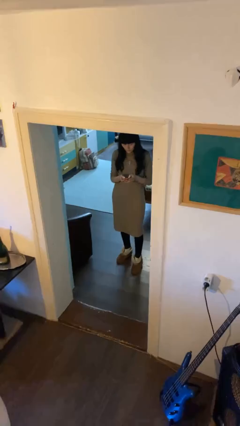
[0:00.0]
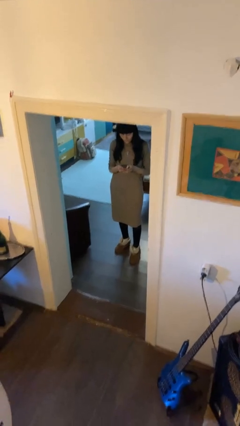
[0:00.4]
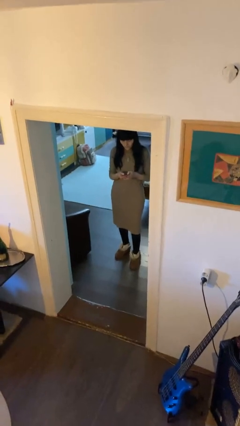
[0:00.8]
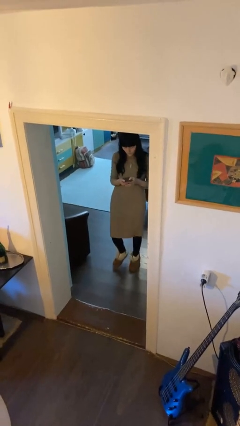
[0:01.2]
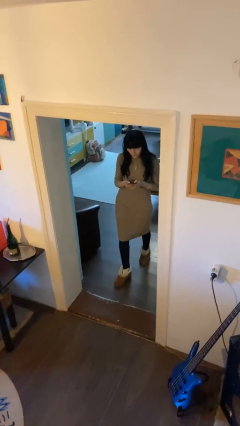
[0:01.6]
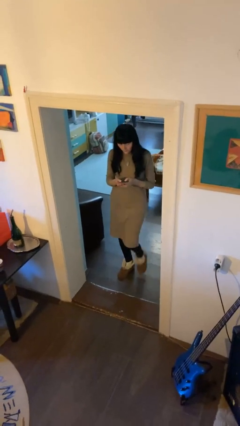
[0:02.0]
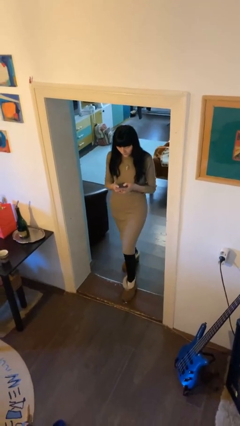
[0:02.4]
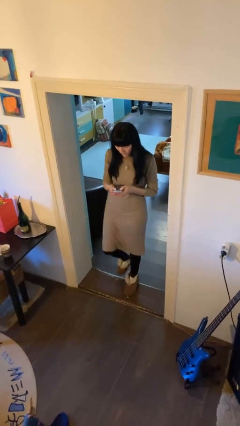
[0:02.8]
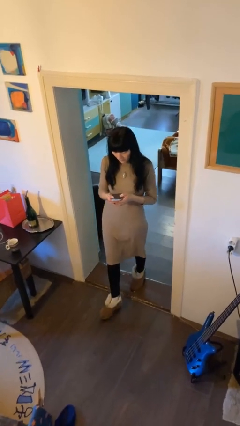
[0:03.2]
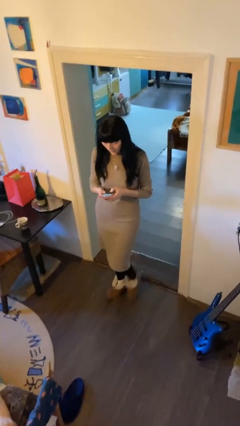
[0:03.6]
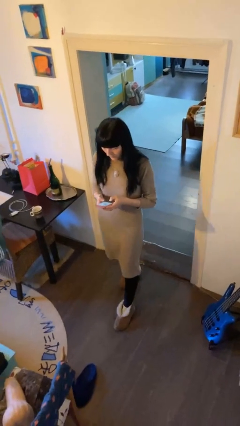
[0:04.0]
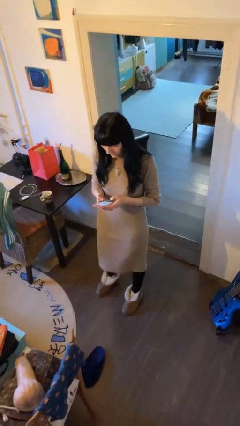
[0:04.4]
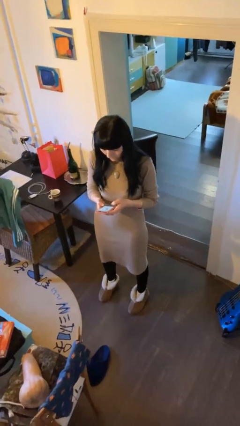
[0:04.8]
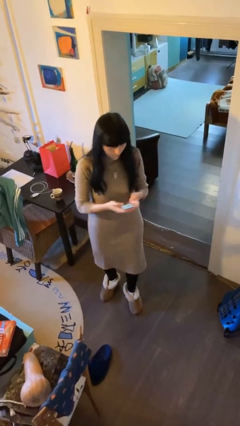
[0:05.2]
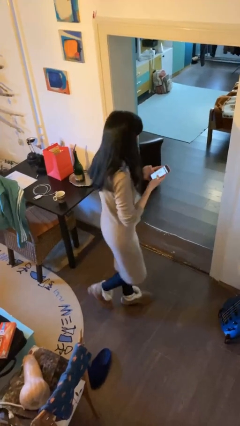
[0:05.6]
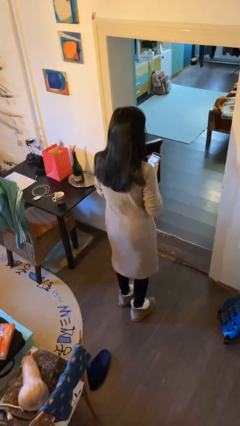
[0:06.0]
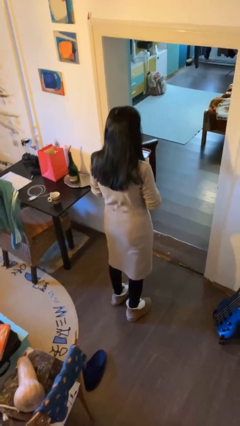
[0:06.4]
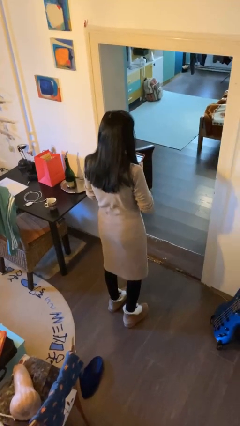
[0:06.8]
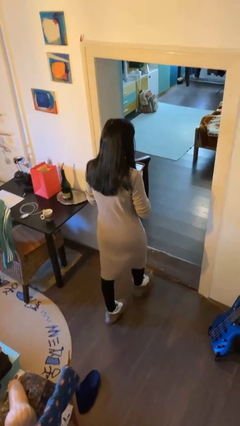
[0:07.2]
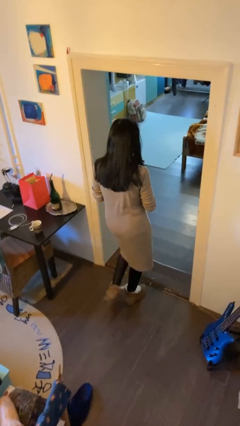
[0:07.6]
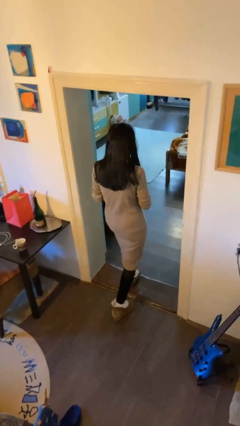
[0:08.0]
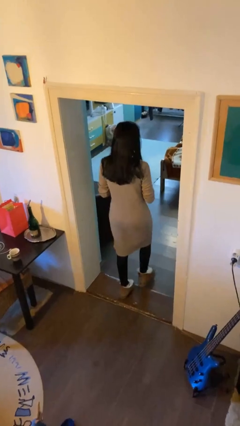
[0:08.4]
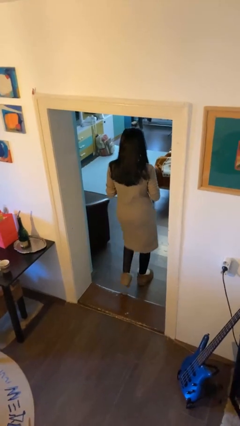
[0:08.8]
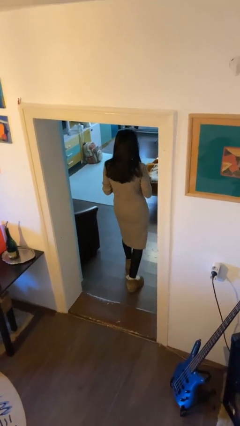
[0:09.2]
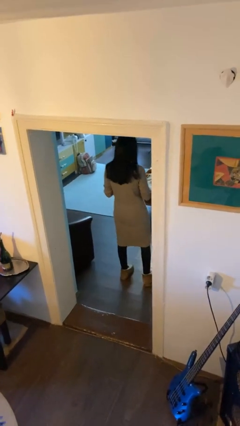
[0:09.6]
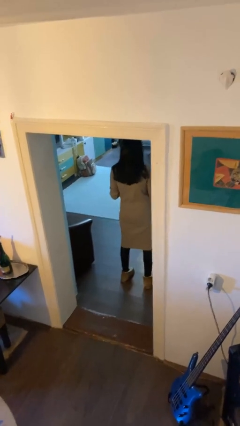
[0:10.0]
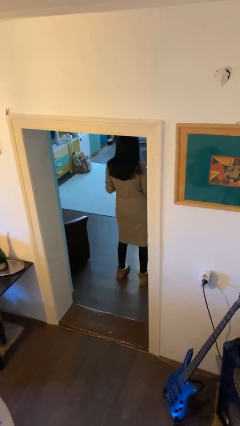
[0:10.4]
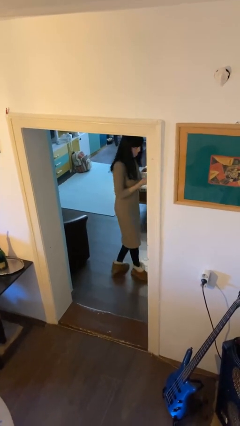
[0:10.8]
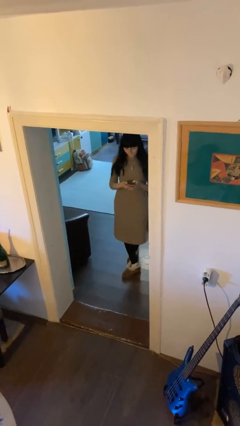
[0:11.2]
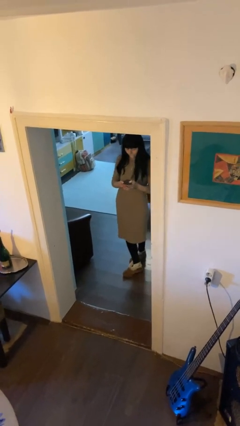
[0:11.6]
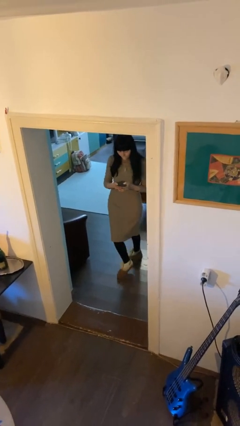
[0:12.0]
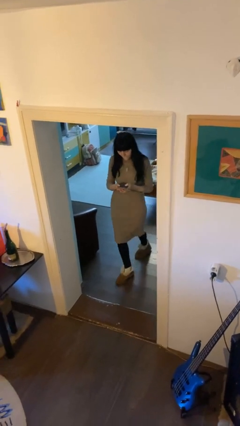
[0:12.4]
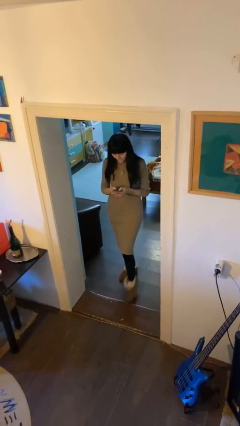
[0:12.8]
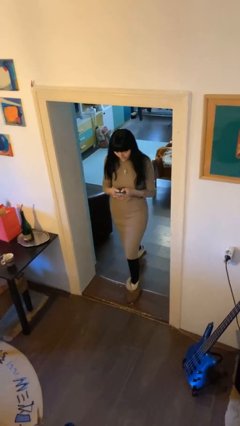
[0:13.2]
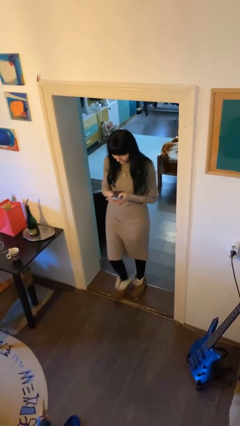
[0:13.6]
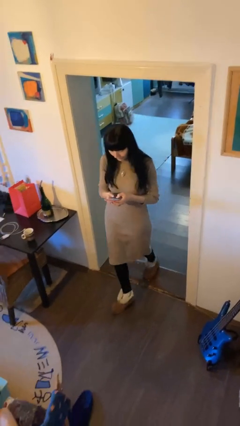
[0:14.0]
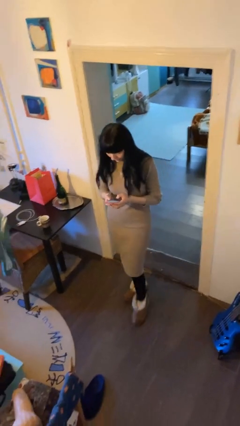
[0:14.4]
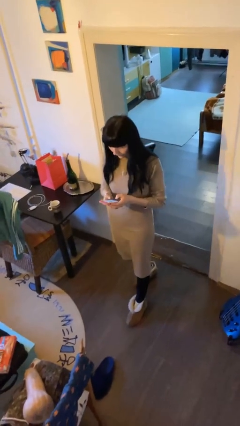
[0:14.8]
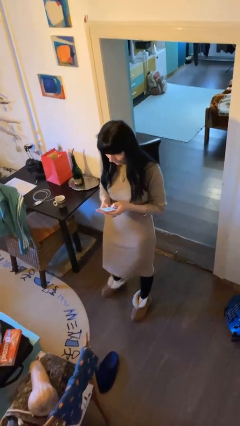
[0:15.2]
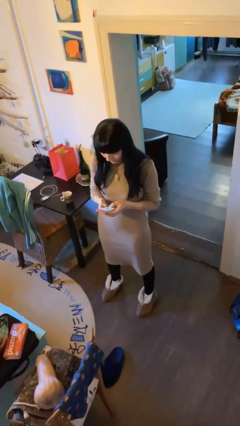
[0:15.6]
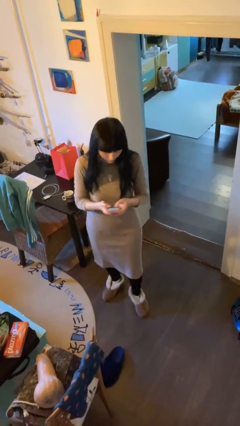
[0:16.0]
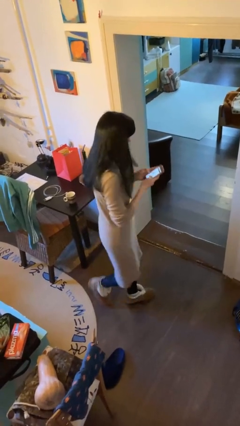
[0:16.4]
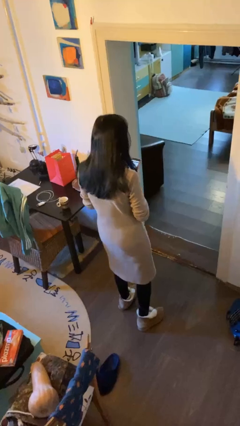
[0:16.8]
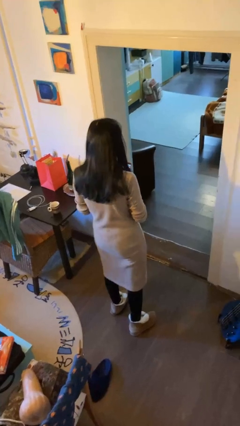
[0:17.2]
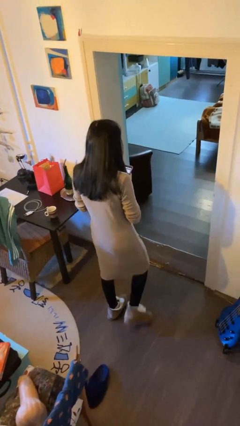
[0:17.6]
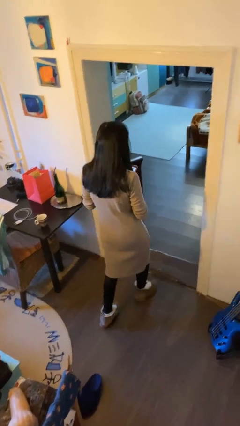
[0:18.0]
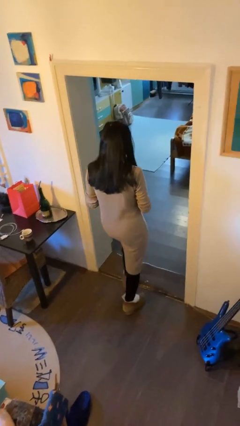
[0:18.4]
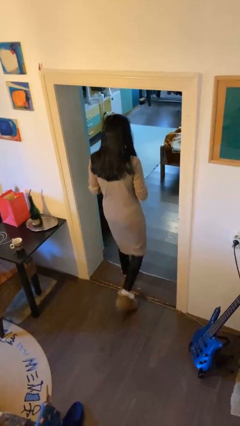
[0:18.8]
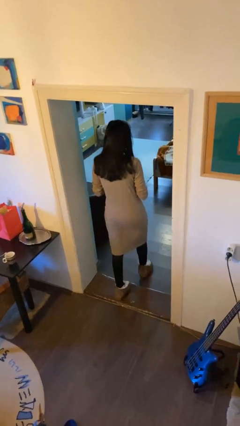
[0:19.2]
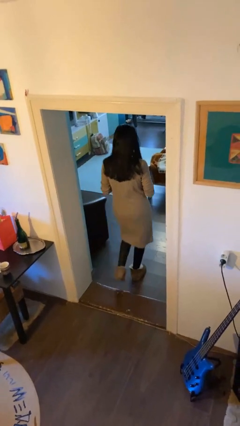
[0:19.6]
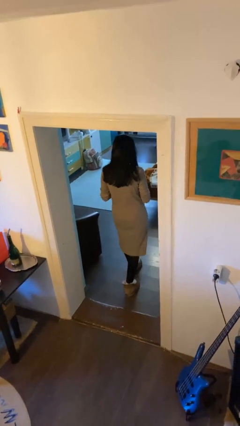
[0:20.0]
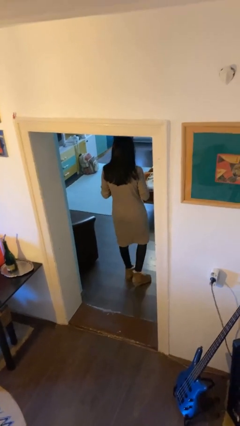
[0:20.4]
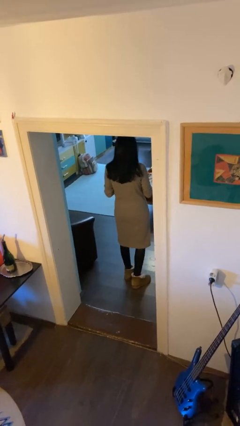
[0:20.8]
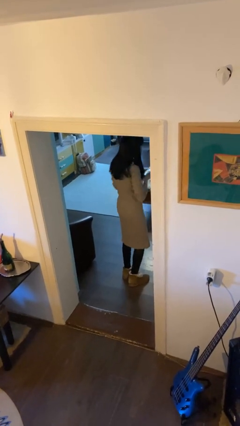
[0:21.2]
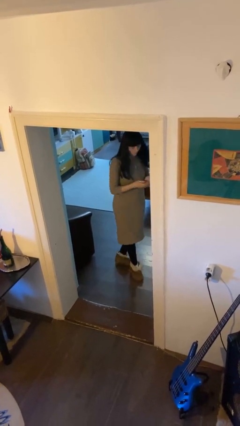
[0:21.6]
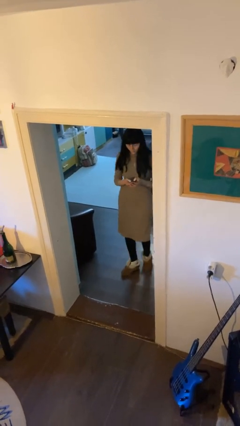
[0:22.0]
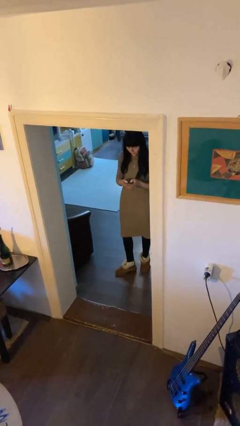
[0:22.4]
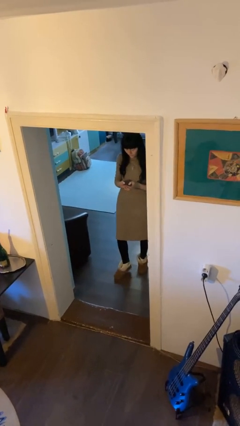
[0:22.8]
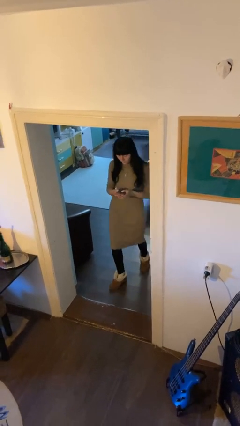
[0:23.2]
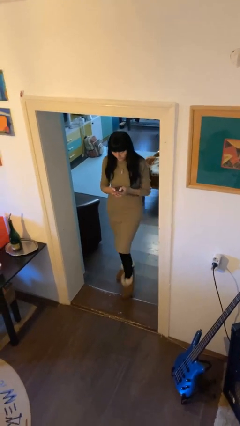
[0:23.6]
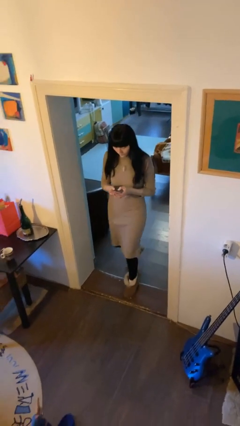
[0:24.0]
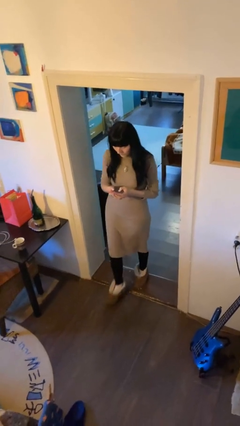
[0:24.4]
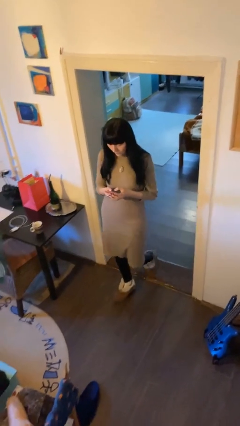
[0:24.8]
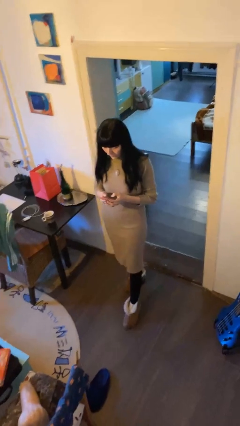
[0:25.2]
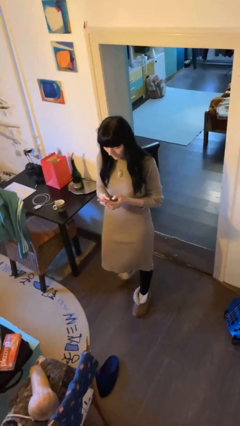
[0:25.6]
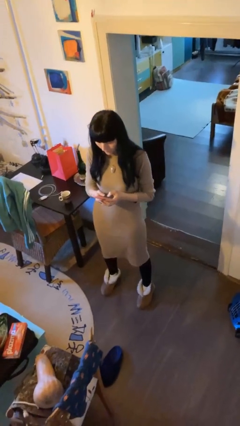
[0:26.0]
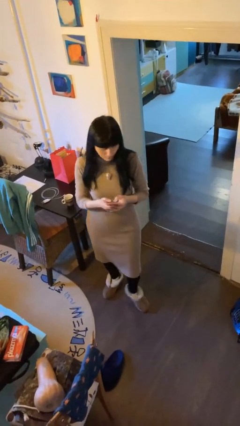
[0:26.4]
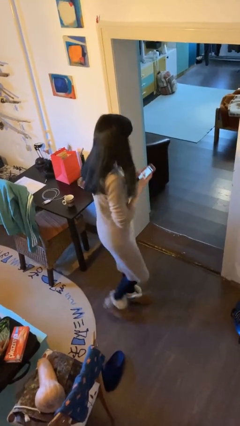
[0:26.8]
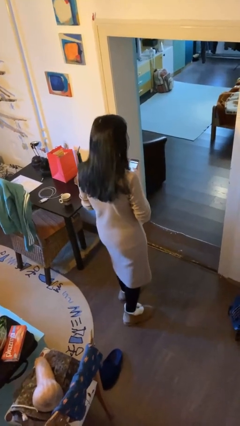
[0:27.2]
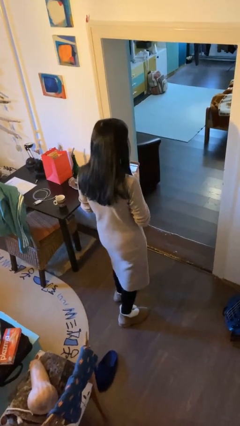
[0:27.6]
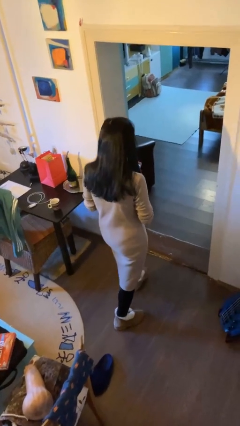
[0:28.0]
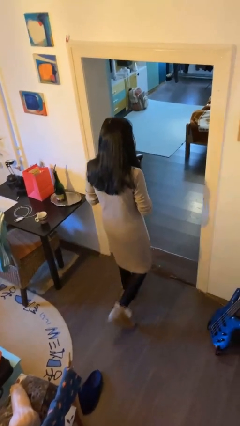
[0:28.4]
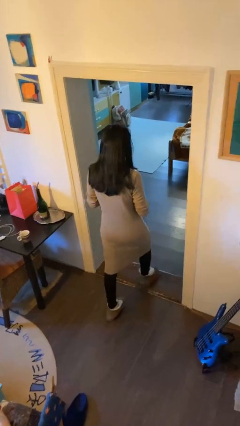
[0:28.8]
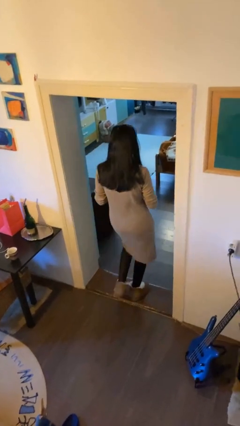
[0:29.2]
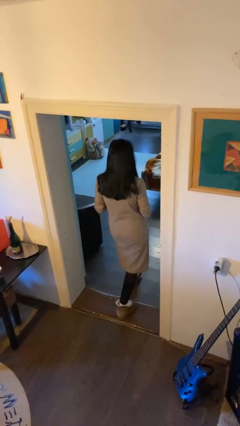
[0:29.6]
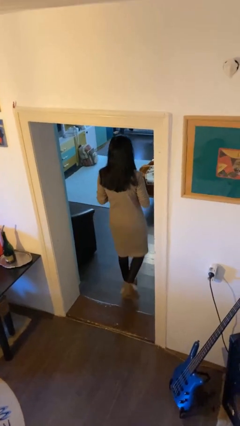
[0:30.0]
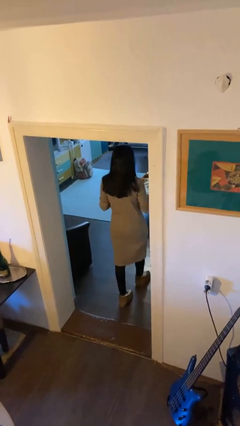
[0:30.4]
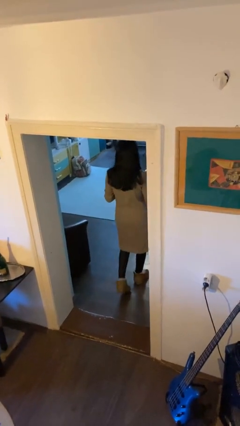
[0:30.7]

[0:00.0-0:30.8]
person texts on phone

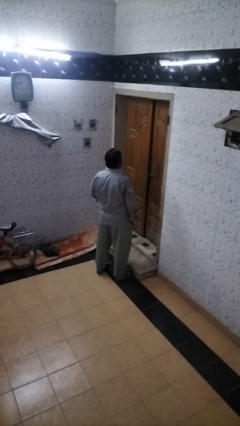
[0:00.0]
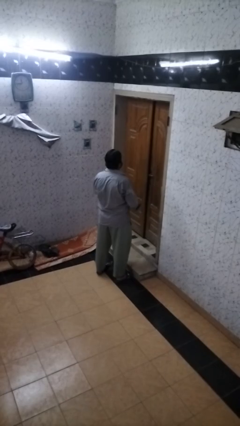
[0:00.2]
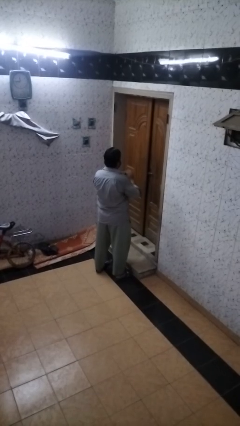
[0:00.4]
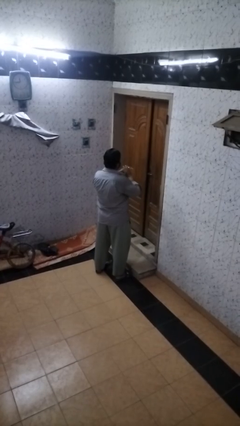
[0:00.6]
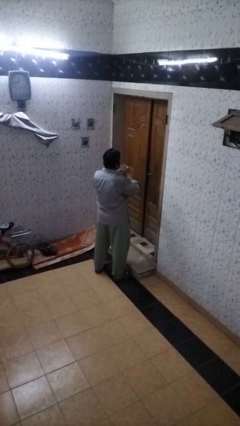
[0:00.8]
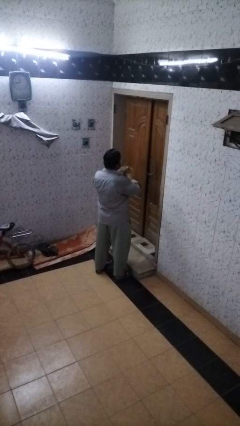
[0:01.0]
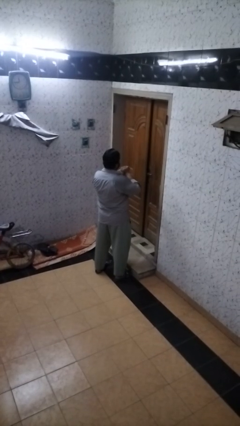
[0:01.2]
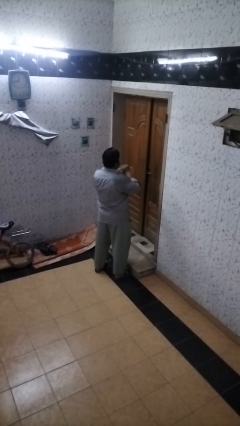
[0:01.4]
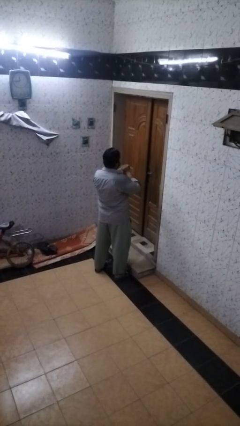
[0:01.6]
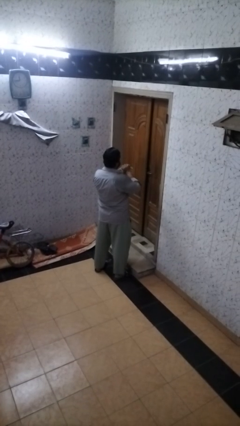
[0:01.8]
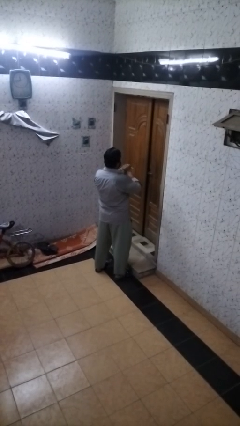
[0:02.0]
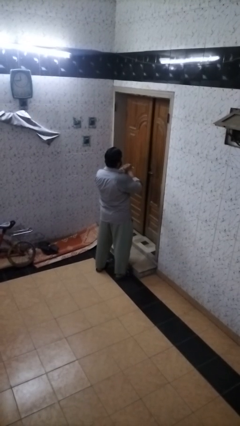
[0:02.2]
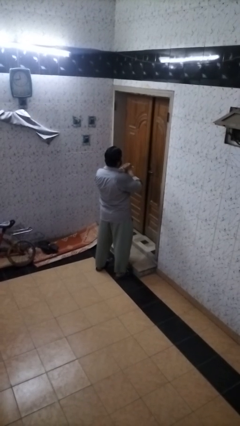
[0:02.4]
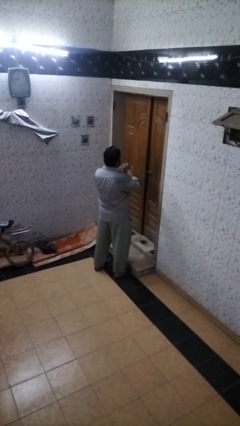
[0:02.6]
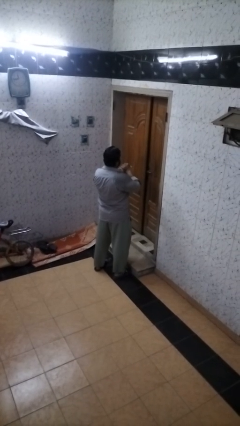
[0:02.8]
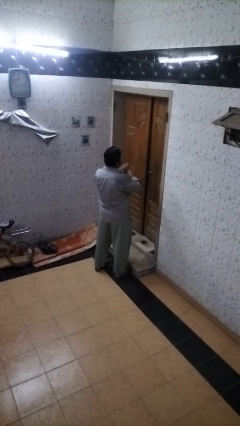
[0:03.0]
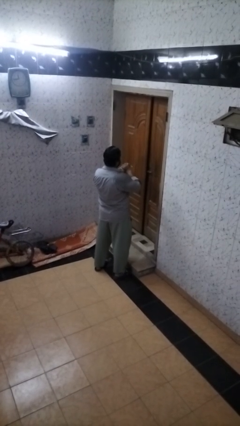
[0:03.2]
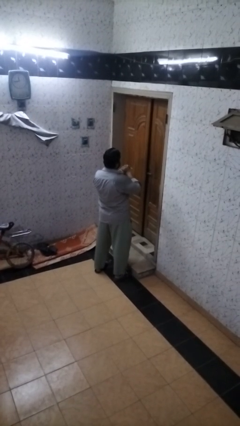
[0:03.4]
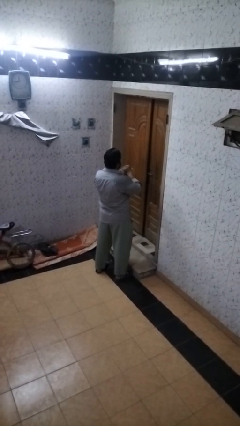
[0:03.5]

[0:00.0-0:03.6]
person puts on ring
